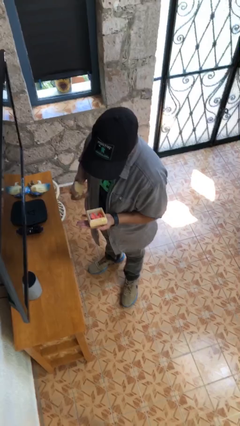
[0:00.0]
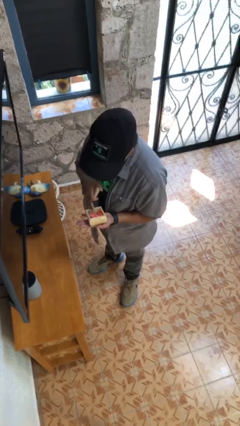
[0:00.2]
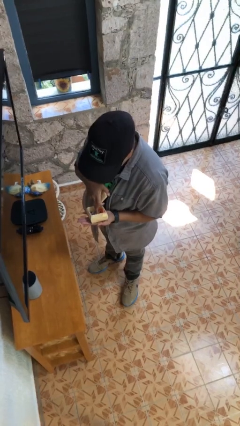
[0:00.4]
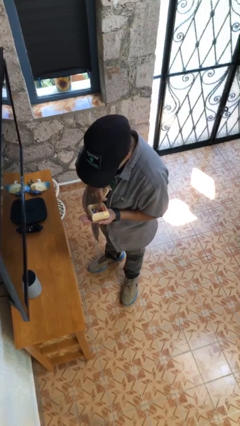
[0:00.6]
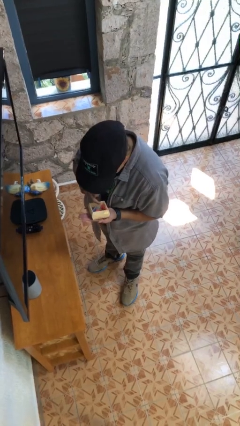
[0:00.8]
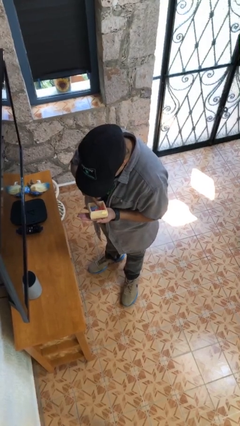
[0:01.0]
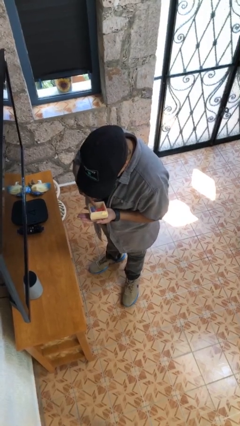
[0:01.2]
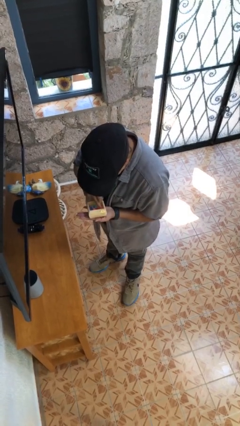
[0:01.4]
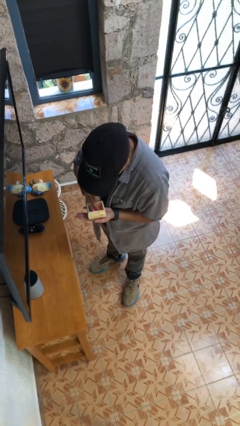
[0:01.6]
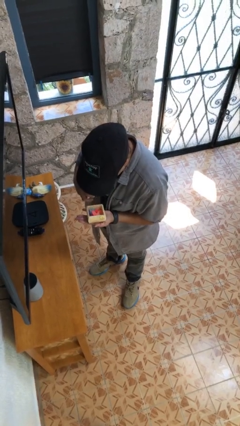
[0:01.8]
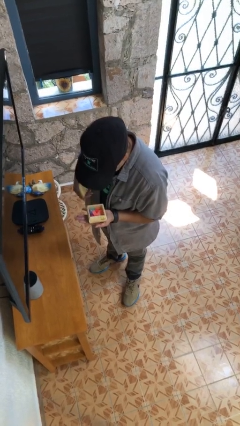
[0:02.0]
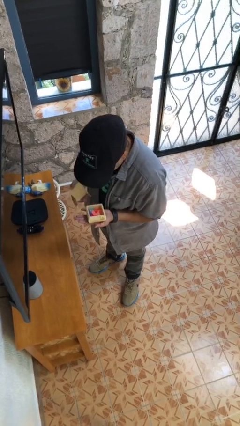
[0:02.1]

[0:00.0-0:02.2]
person searches jewelry box

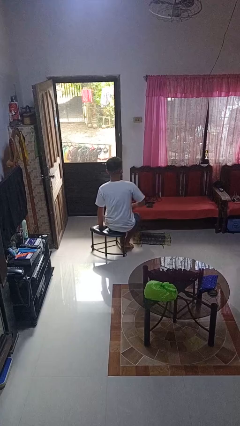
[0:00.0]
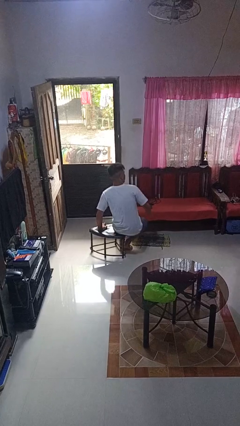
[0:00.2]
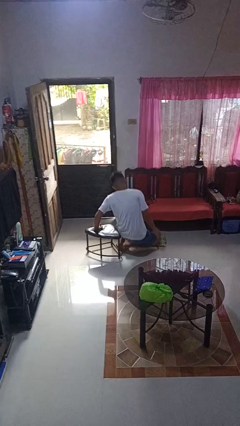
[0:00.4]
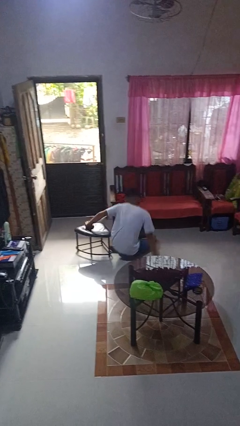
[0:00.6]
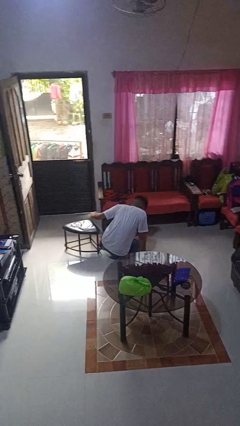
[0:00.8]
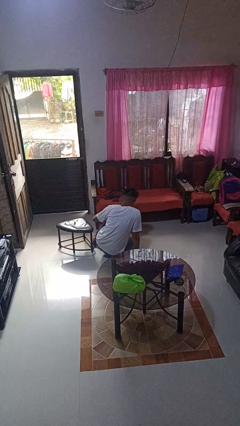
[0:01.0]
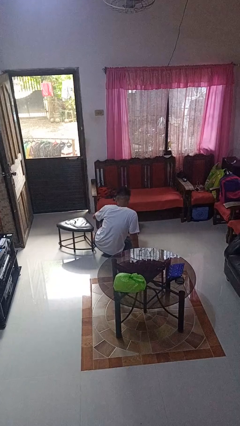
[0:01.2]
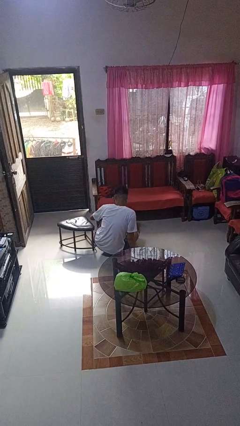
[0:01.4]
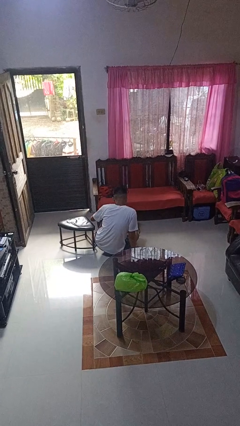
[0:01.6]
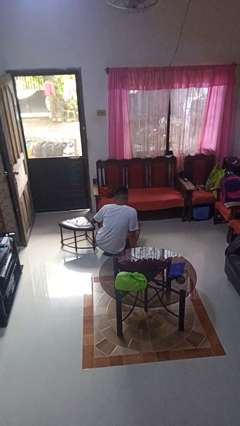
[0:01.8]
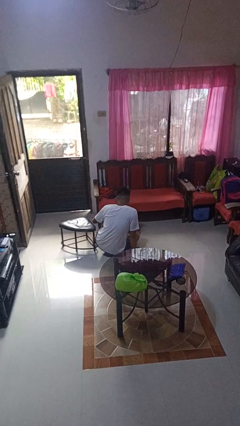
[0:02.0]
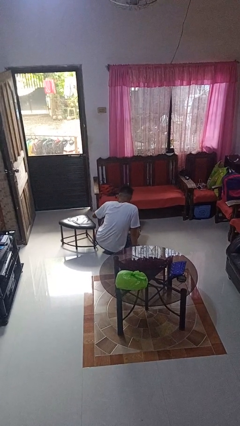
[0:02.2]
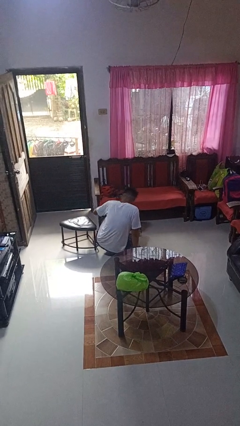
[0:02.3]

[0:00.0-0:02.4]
person falls from chair

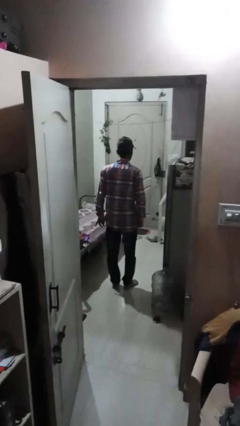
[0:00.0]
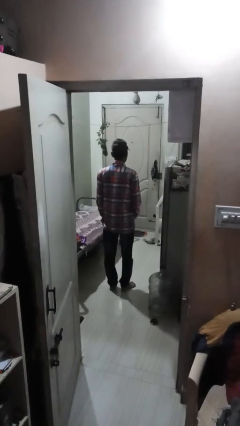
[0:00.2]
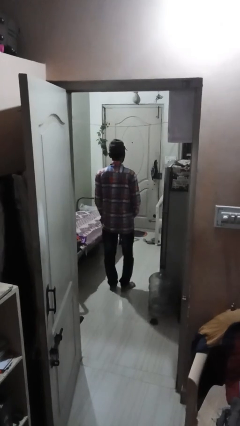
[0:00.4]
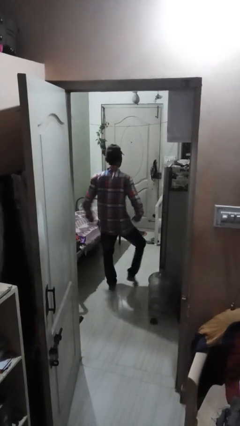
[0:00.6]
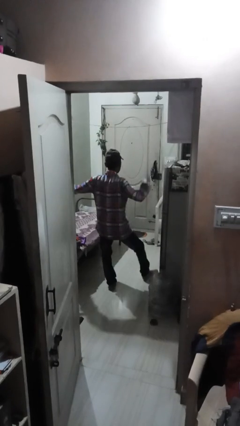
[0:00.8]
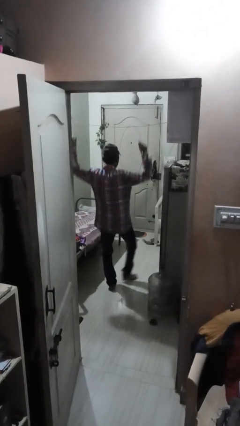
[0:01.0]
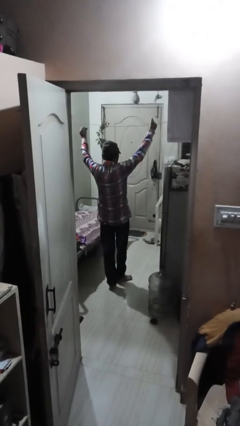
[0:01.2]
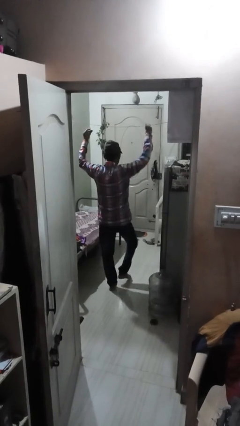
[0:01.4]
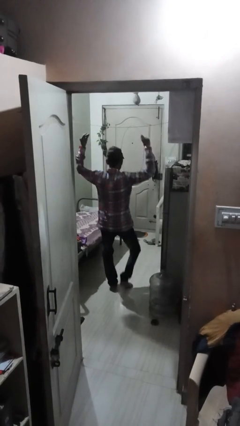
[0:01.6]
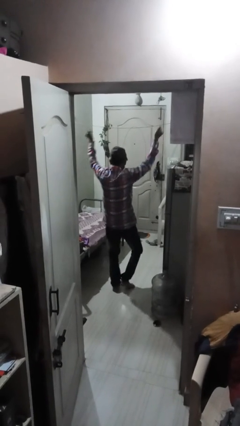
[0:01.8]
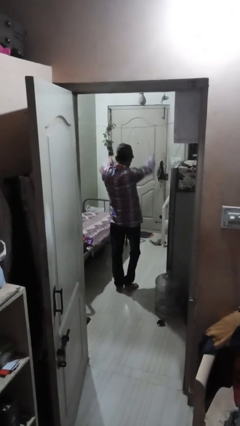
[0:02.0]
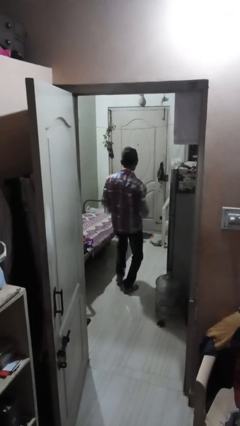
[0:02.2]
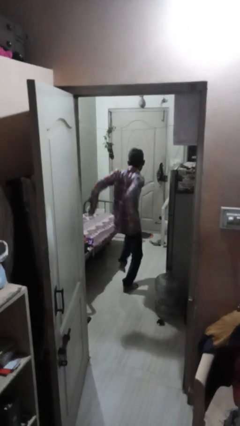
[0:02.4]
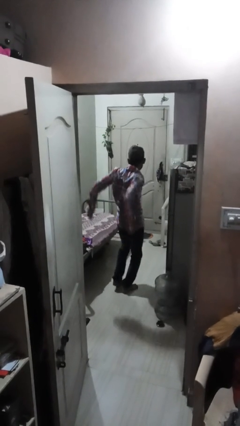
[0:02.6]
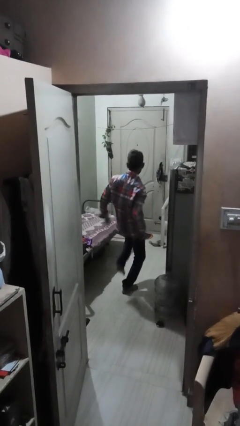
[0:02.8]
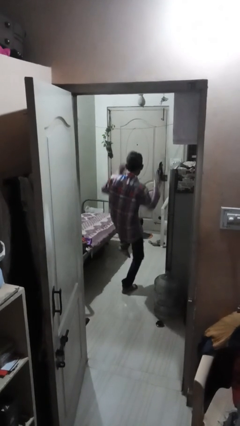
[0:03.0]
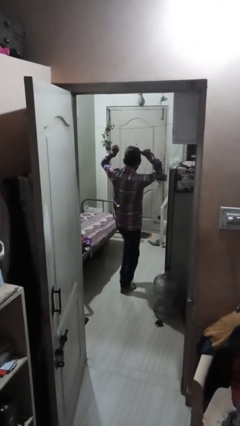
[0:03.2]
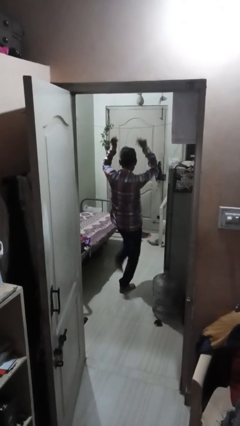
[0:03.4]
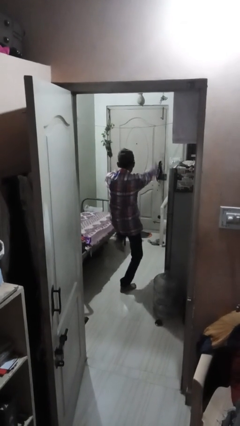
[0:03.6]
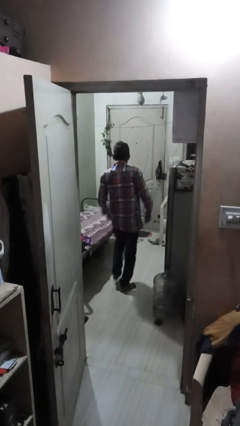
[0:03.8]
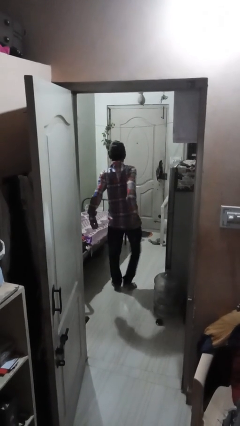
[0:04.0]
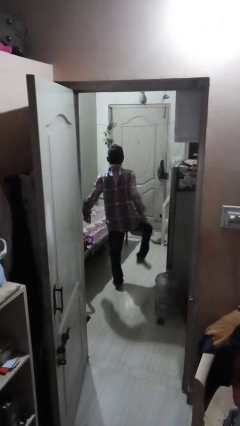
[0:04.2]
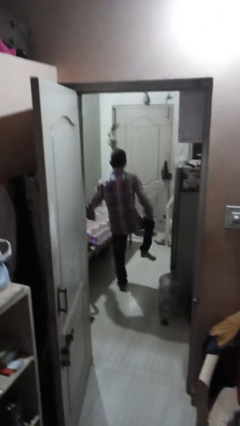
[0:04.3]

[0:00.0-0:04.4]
person dances in place

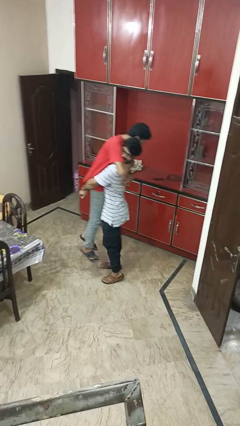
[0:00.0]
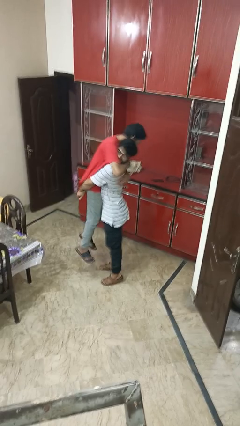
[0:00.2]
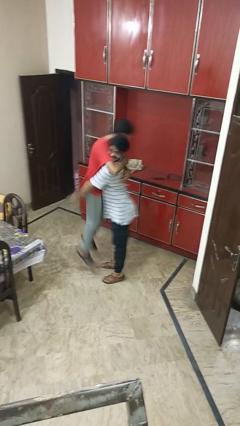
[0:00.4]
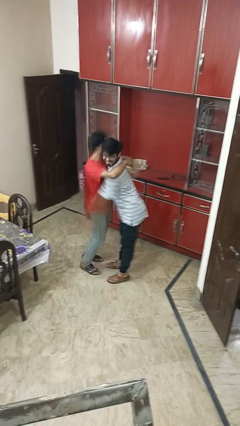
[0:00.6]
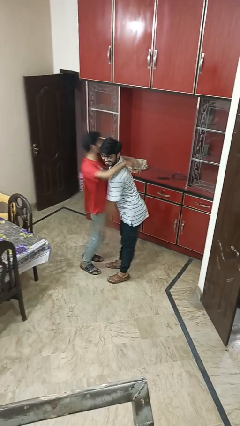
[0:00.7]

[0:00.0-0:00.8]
person puts down person

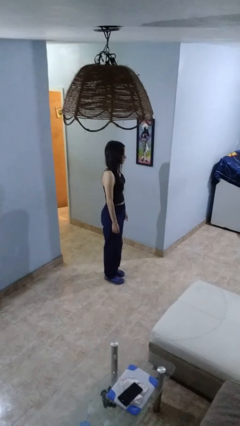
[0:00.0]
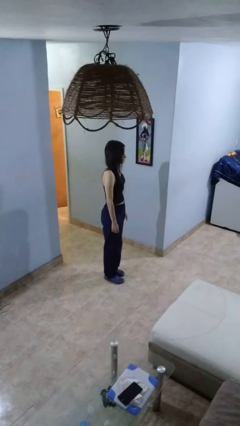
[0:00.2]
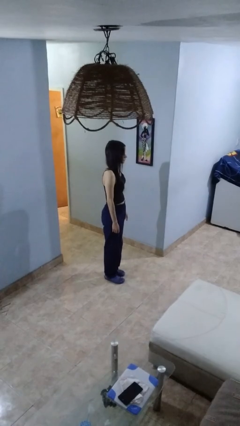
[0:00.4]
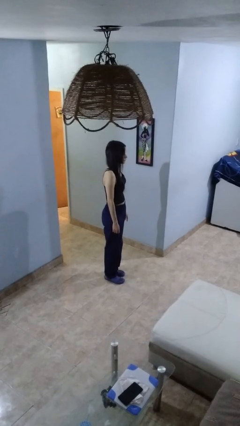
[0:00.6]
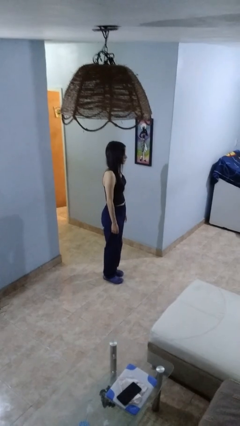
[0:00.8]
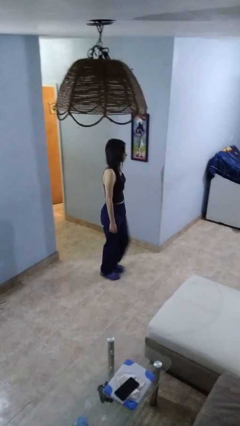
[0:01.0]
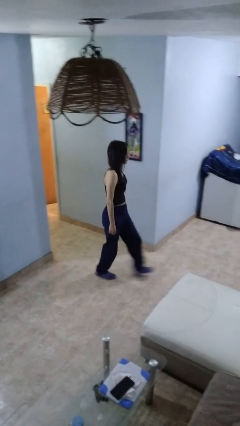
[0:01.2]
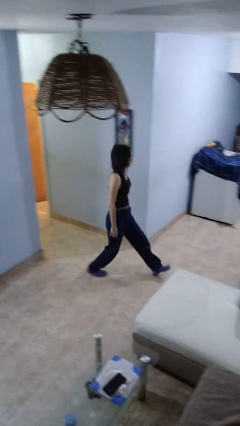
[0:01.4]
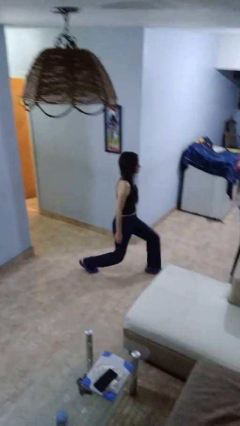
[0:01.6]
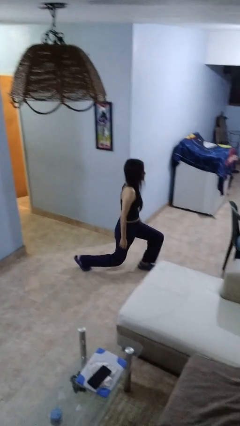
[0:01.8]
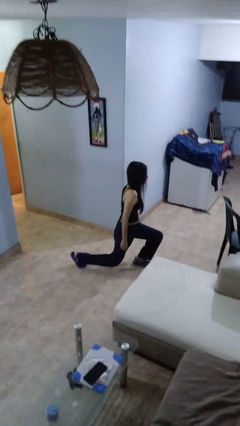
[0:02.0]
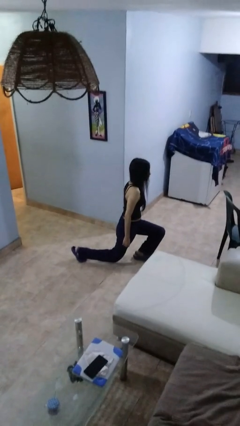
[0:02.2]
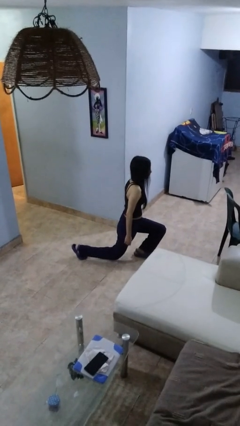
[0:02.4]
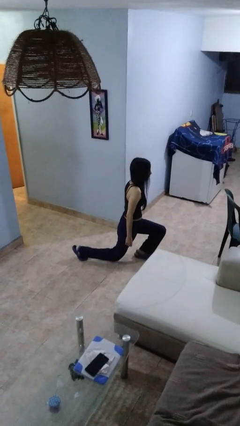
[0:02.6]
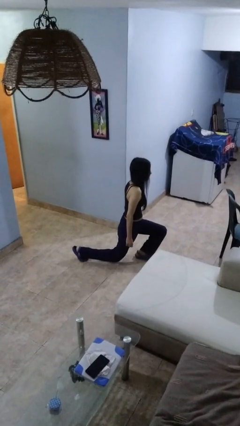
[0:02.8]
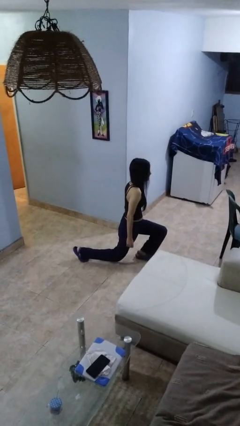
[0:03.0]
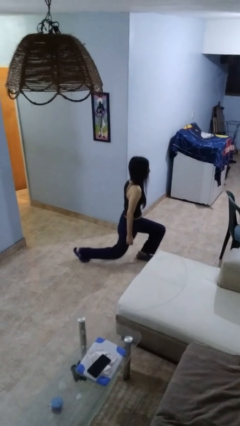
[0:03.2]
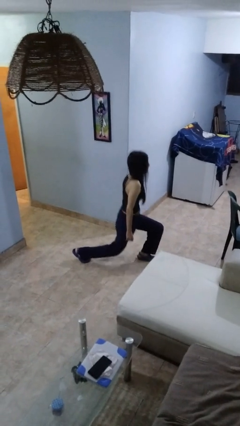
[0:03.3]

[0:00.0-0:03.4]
person exercises with lunges

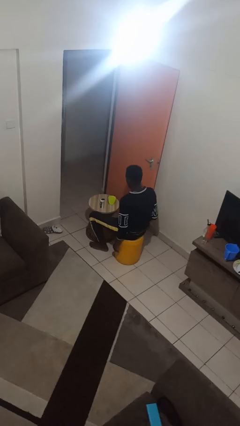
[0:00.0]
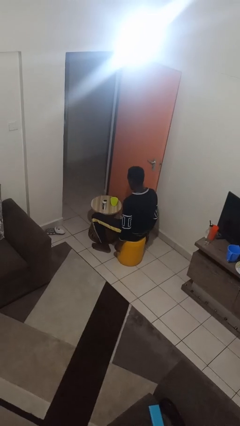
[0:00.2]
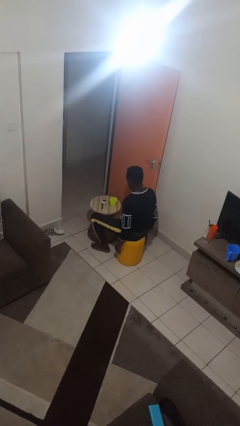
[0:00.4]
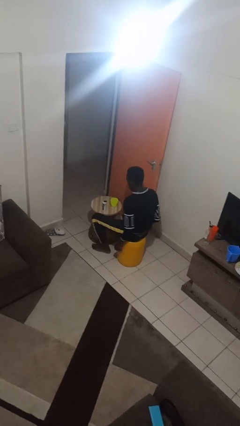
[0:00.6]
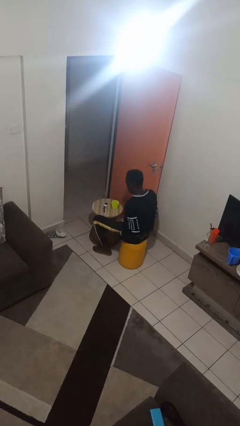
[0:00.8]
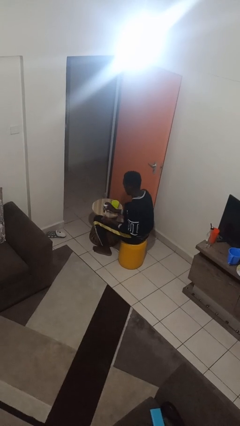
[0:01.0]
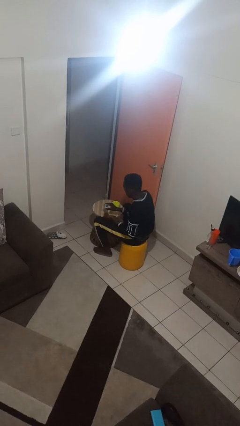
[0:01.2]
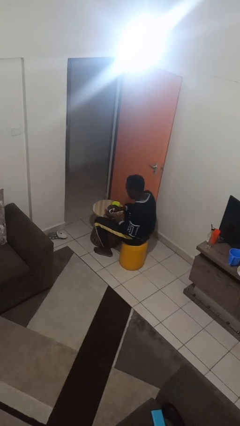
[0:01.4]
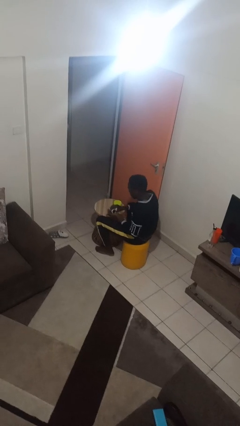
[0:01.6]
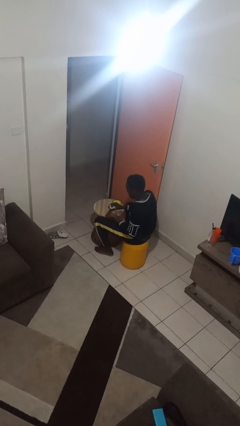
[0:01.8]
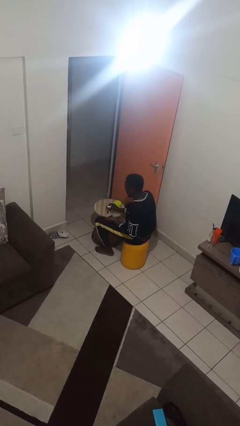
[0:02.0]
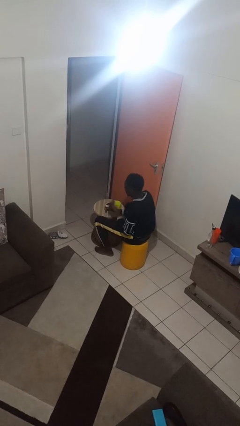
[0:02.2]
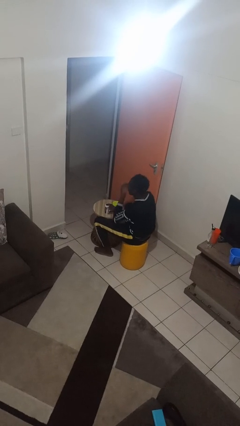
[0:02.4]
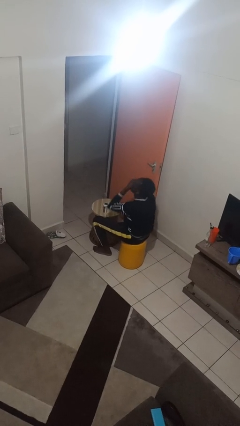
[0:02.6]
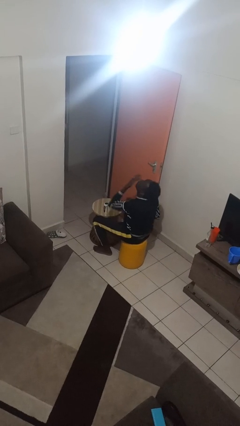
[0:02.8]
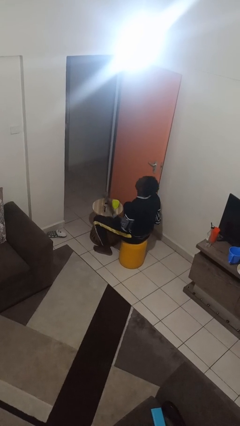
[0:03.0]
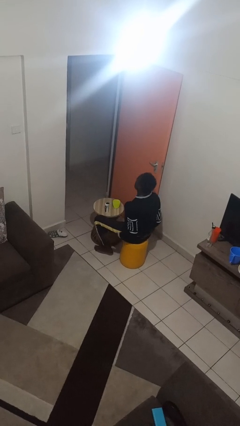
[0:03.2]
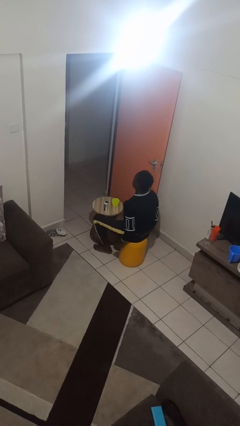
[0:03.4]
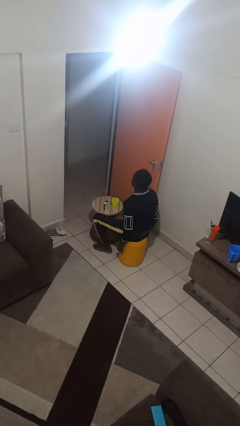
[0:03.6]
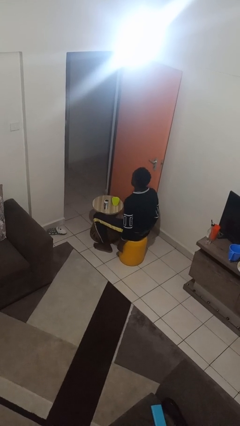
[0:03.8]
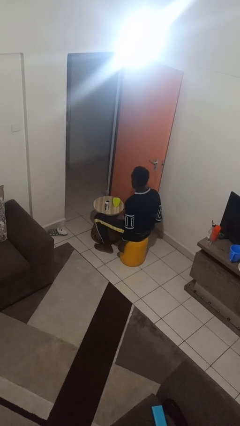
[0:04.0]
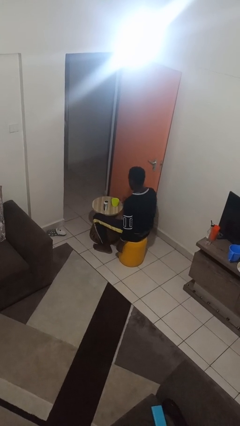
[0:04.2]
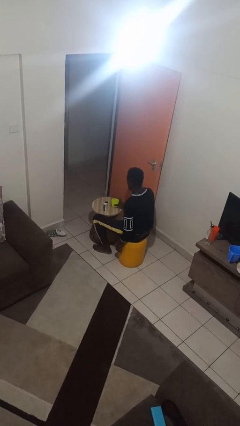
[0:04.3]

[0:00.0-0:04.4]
person takes medicine pills
